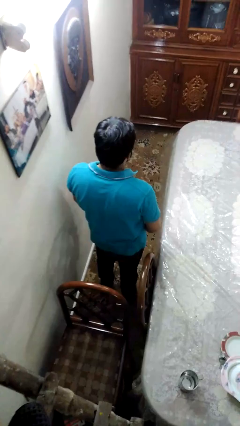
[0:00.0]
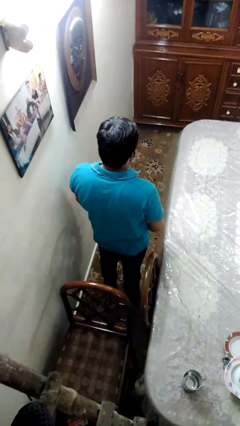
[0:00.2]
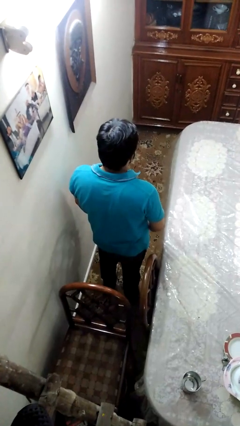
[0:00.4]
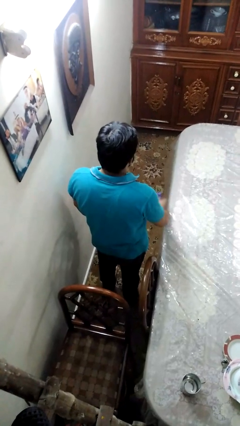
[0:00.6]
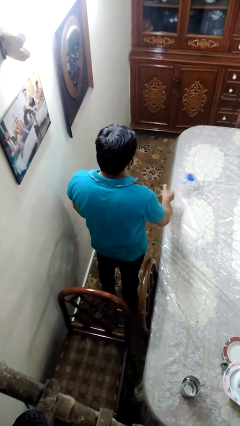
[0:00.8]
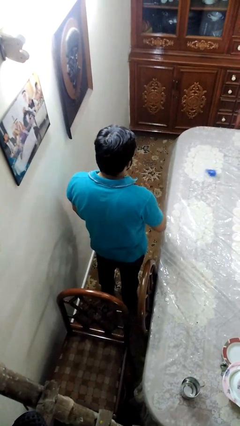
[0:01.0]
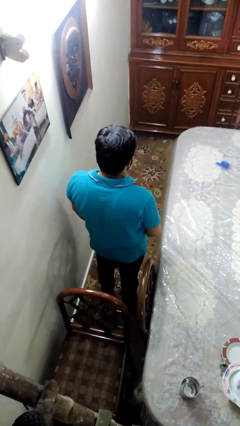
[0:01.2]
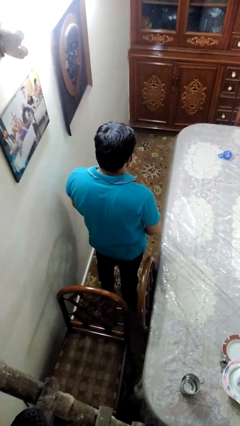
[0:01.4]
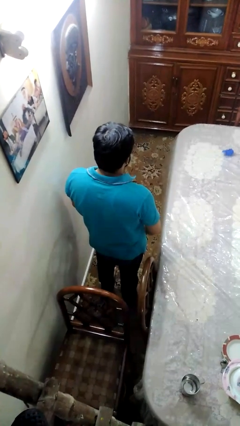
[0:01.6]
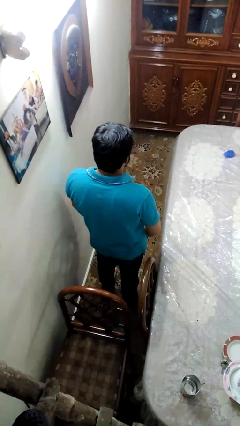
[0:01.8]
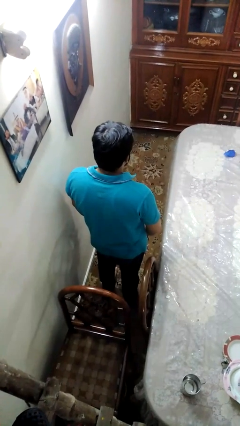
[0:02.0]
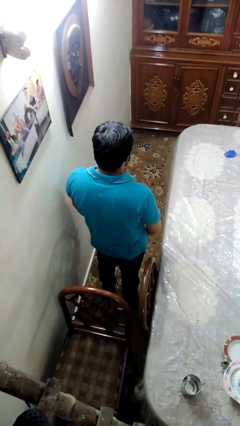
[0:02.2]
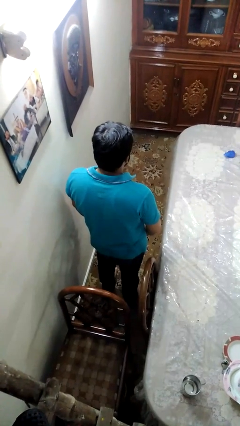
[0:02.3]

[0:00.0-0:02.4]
person throws object on table

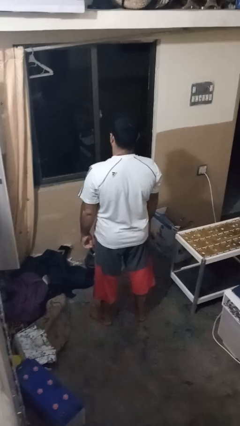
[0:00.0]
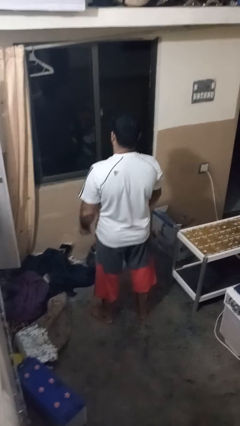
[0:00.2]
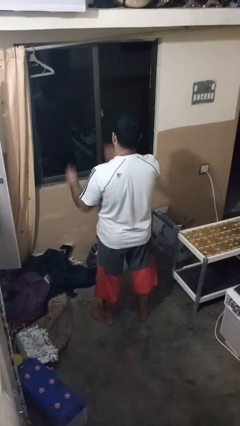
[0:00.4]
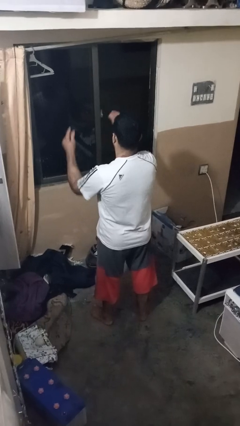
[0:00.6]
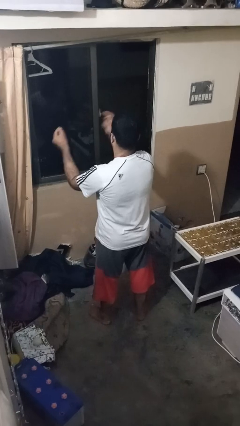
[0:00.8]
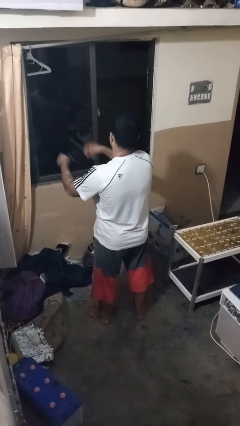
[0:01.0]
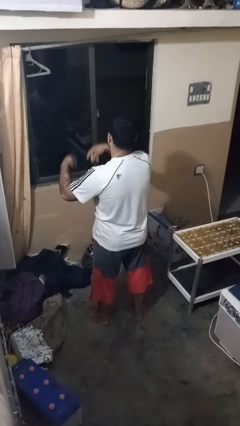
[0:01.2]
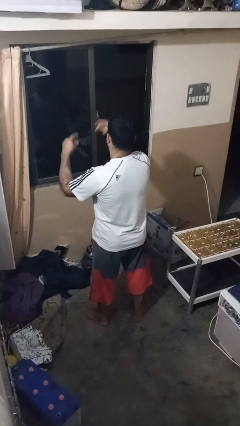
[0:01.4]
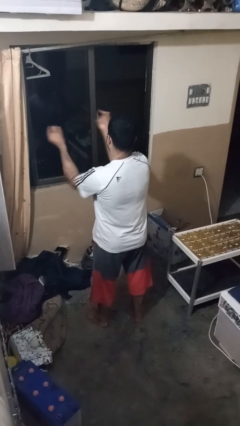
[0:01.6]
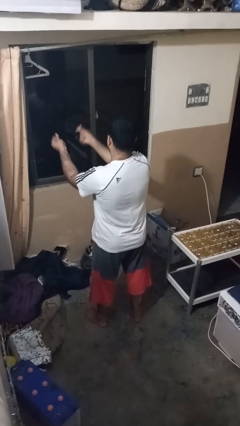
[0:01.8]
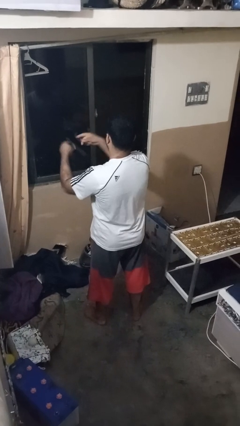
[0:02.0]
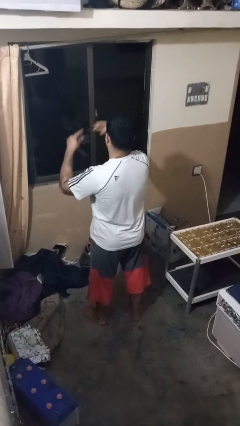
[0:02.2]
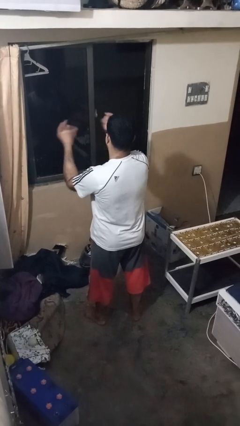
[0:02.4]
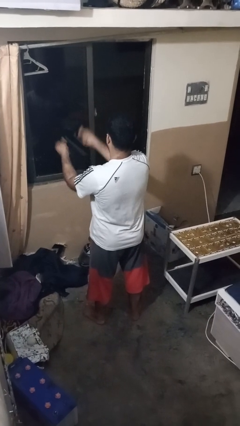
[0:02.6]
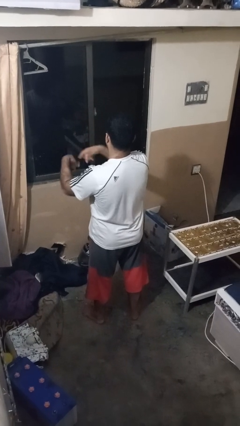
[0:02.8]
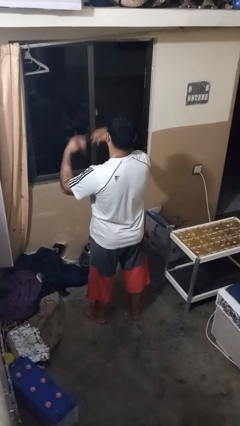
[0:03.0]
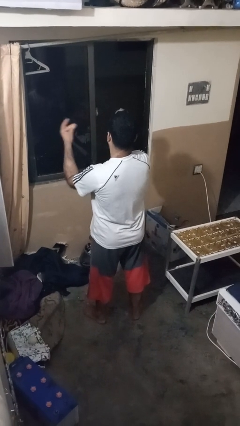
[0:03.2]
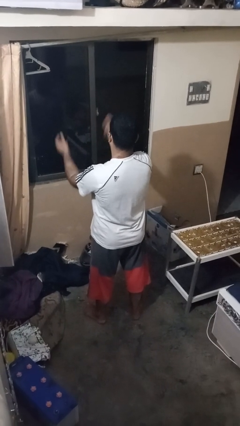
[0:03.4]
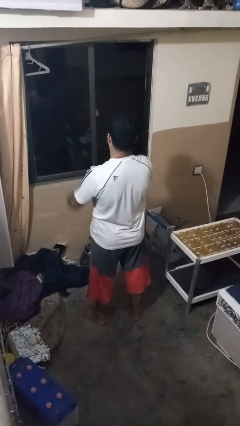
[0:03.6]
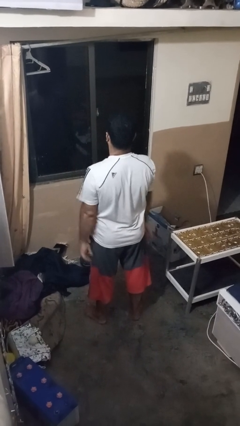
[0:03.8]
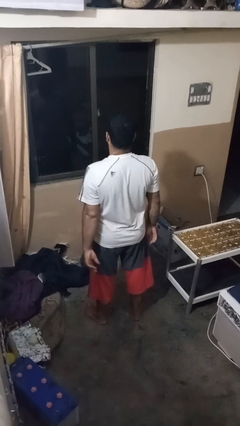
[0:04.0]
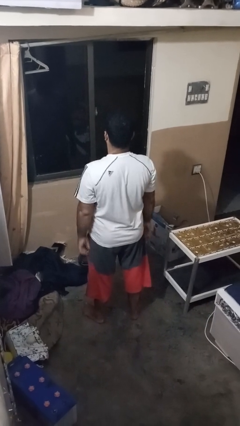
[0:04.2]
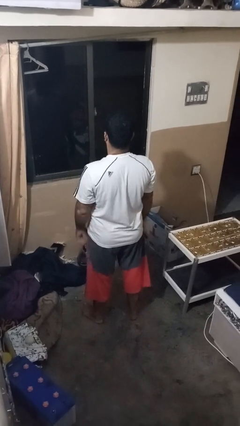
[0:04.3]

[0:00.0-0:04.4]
person snaps fingers

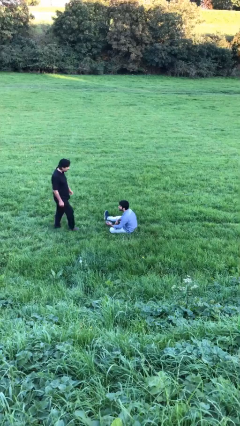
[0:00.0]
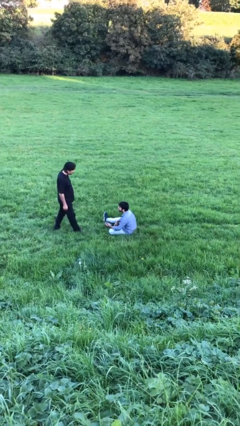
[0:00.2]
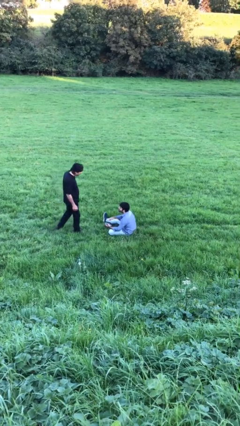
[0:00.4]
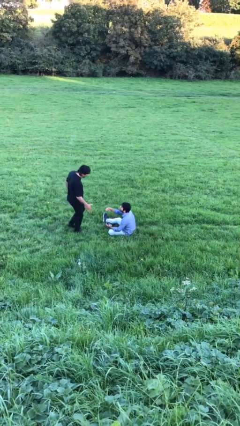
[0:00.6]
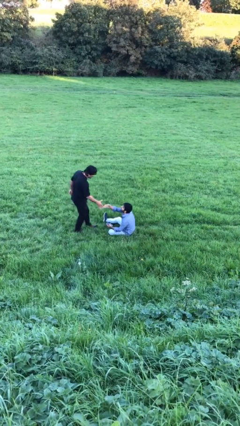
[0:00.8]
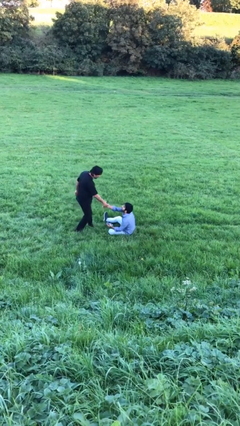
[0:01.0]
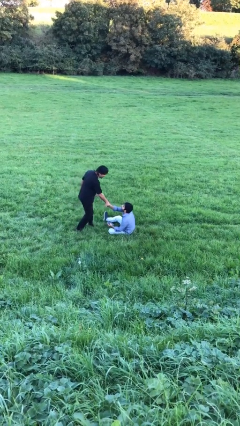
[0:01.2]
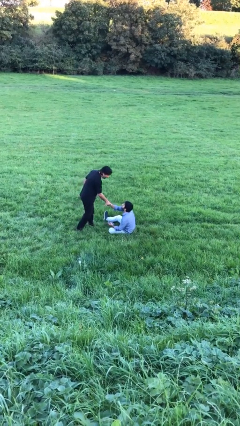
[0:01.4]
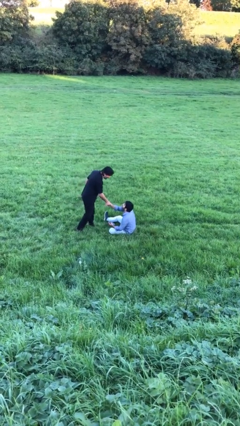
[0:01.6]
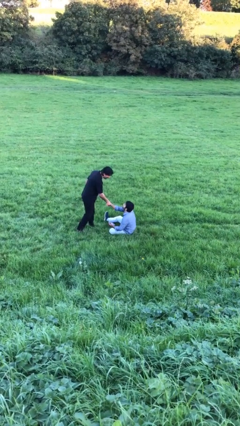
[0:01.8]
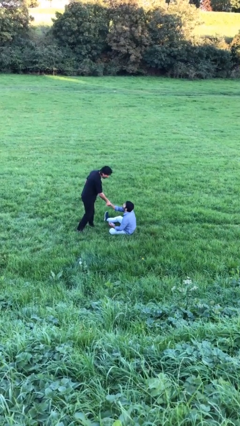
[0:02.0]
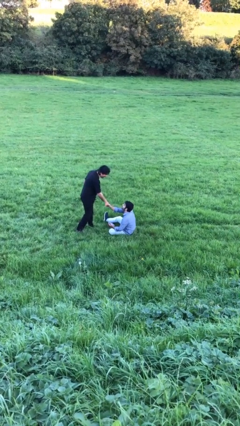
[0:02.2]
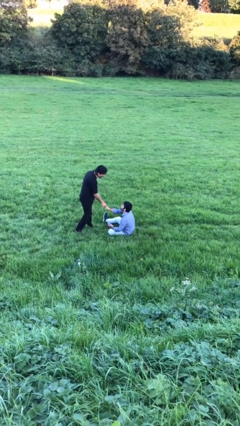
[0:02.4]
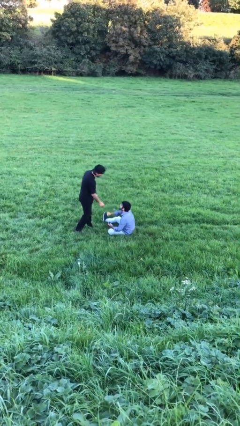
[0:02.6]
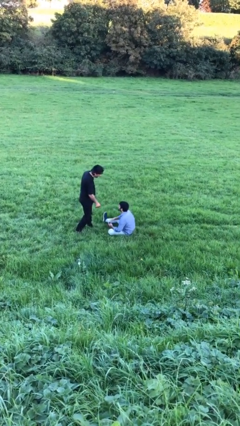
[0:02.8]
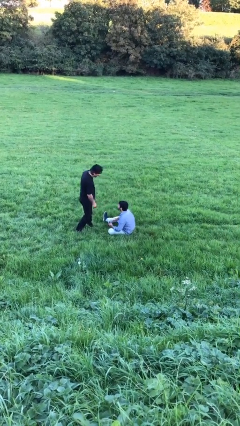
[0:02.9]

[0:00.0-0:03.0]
person shakes hand

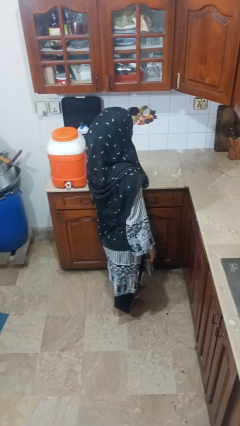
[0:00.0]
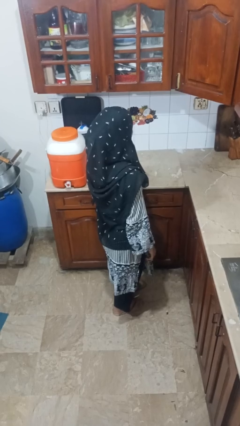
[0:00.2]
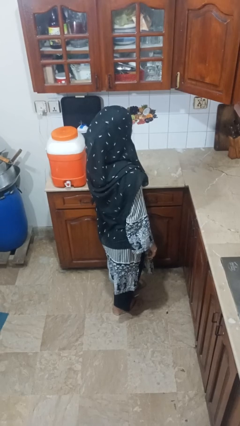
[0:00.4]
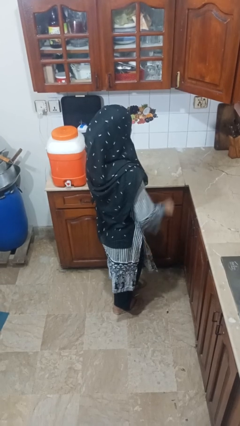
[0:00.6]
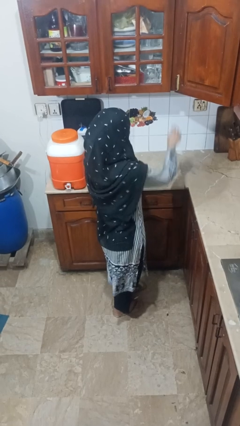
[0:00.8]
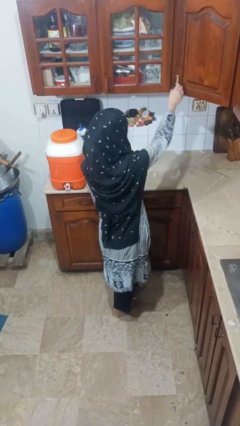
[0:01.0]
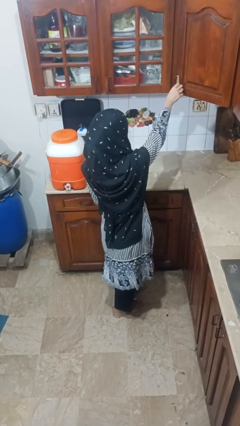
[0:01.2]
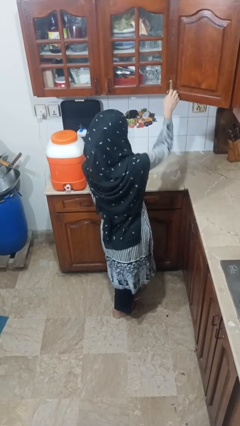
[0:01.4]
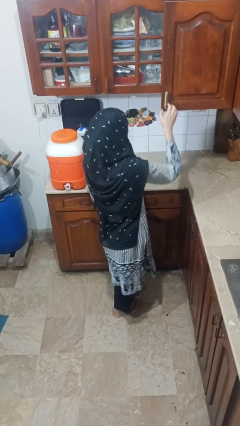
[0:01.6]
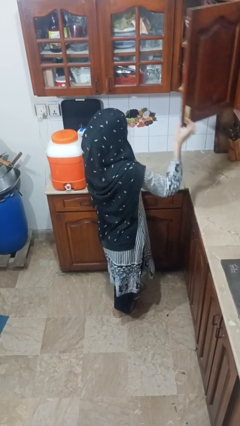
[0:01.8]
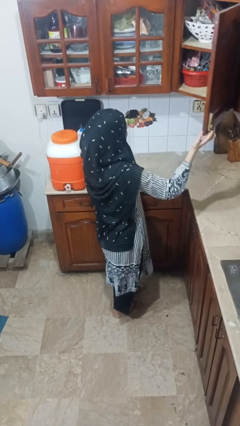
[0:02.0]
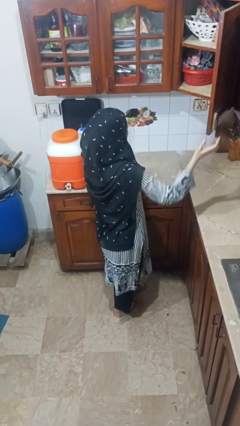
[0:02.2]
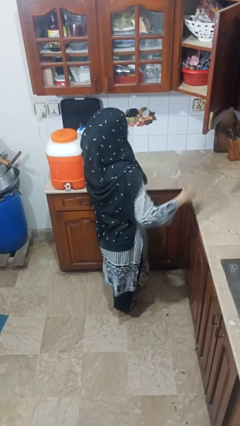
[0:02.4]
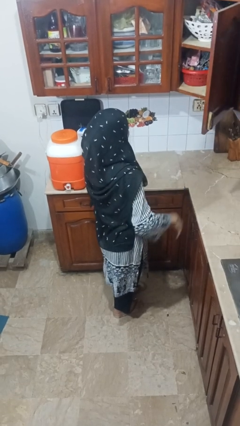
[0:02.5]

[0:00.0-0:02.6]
person opens cabinet

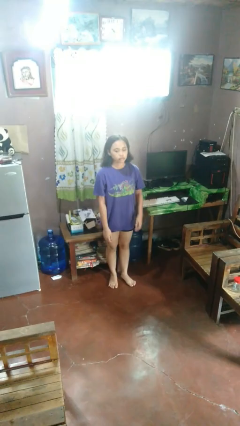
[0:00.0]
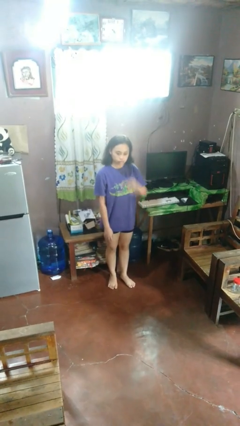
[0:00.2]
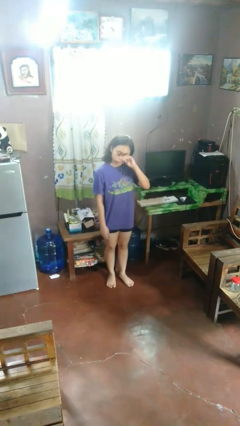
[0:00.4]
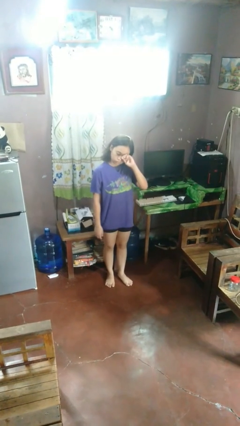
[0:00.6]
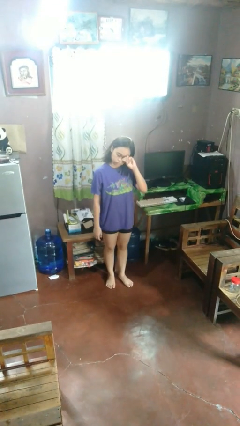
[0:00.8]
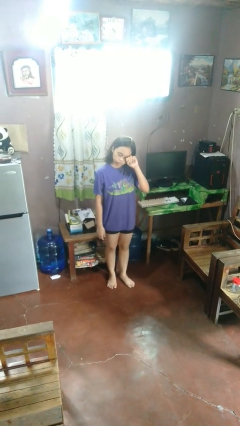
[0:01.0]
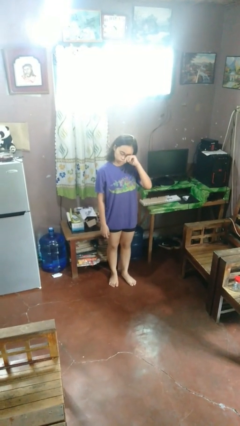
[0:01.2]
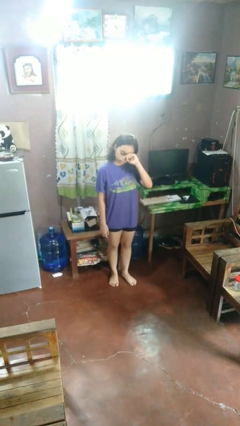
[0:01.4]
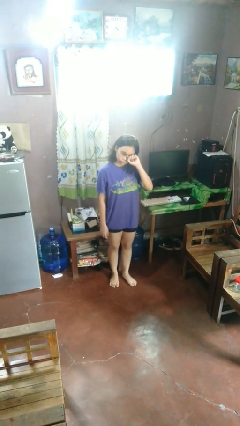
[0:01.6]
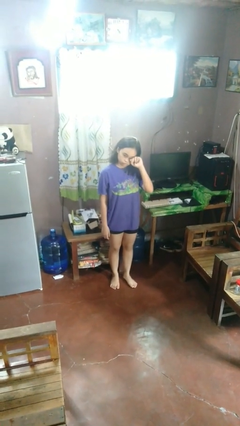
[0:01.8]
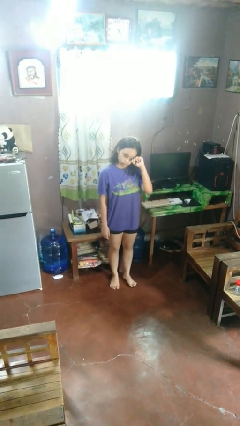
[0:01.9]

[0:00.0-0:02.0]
person rubs eyes

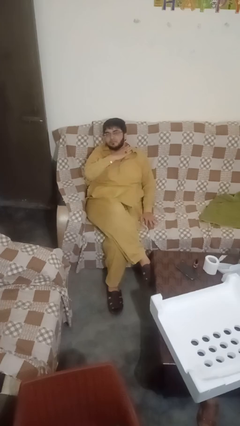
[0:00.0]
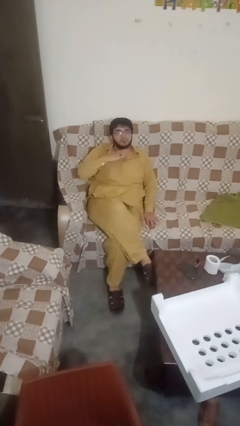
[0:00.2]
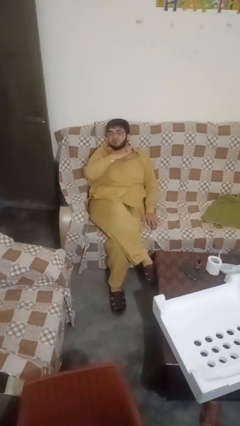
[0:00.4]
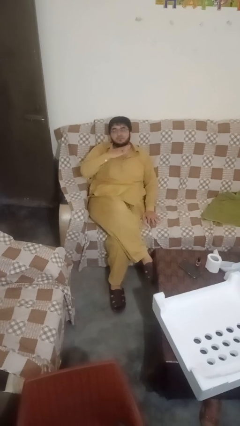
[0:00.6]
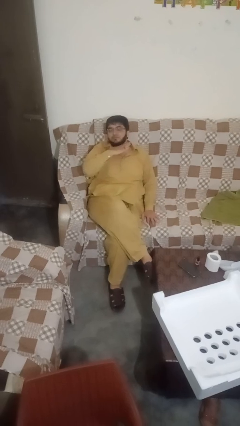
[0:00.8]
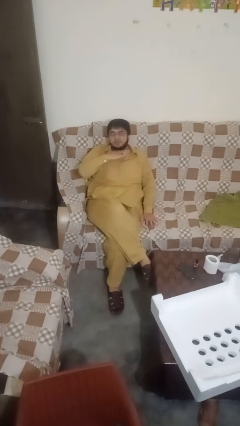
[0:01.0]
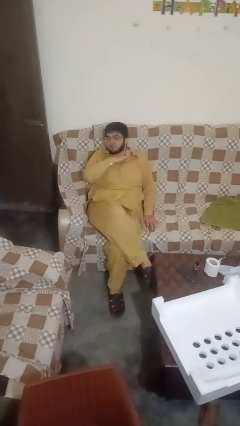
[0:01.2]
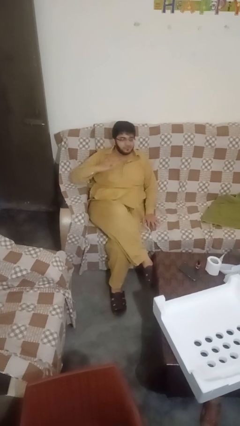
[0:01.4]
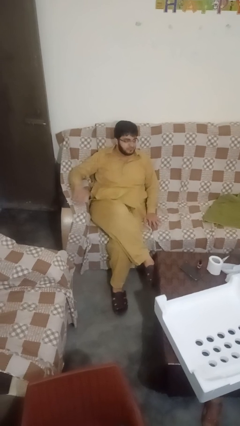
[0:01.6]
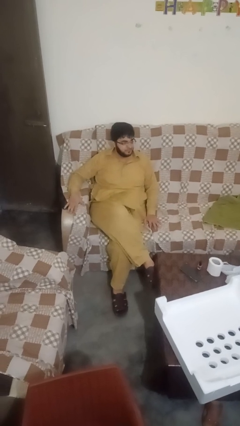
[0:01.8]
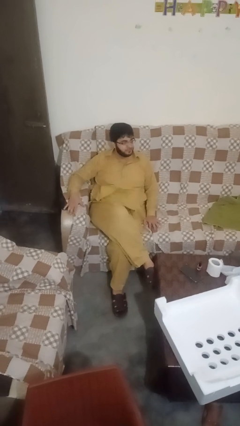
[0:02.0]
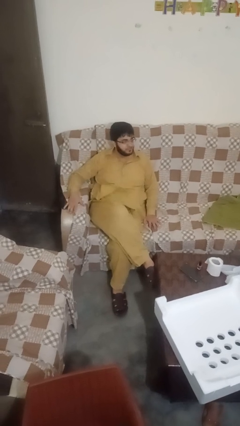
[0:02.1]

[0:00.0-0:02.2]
person gestures cut

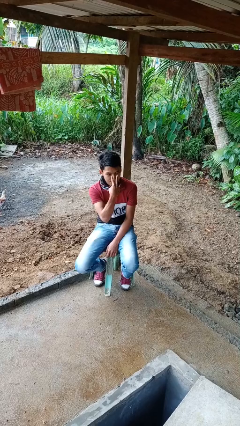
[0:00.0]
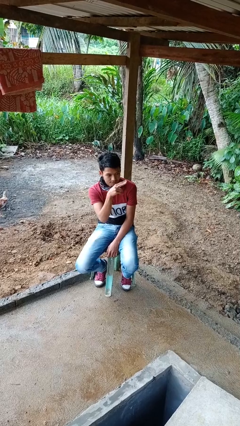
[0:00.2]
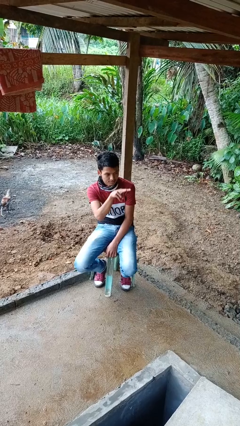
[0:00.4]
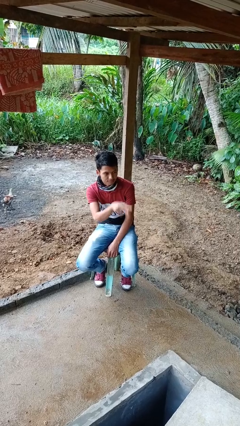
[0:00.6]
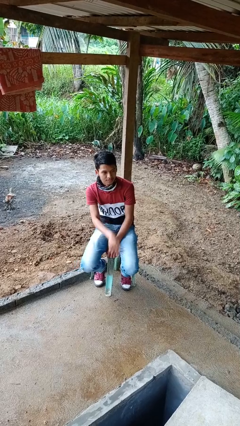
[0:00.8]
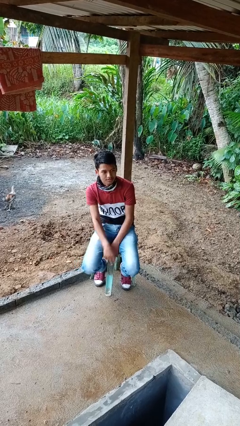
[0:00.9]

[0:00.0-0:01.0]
person gestures watch closely
